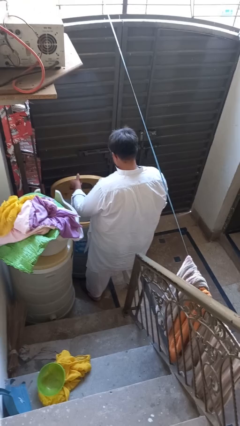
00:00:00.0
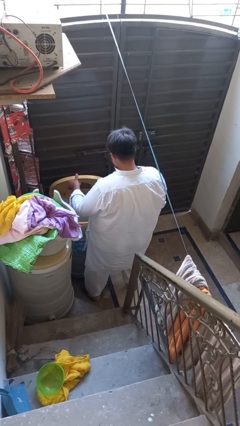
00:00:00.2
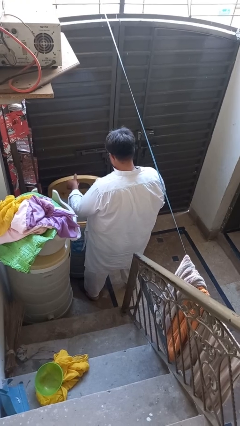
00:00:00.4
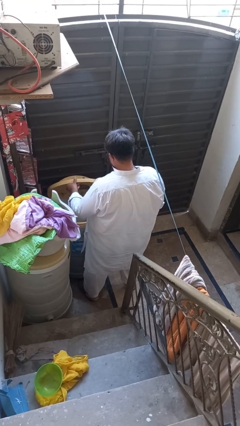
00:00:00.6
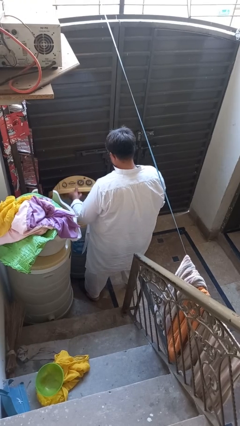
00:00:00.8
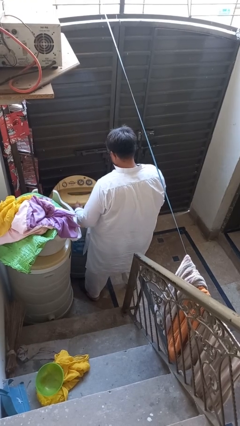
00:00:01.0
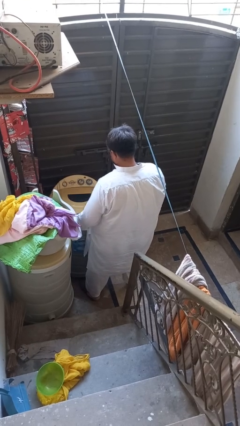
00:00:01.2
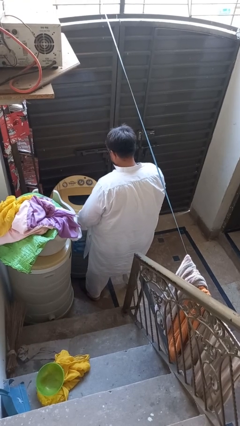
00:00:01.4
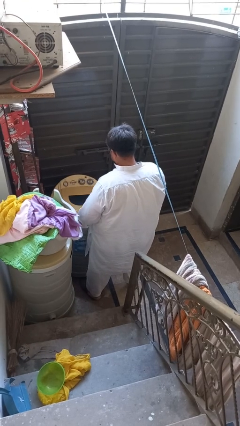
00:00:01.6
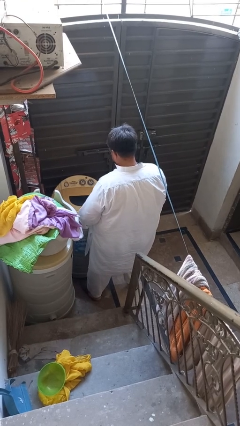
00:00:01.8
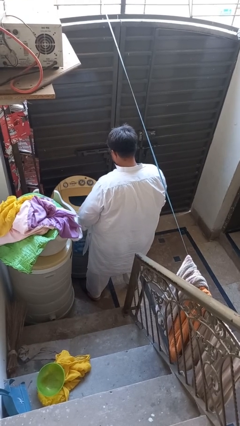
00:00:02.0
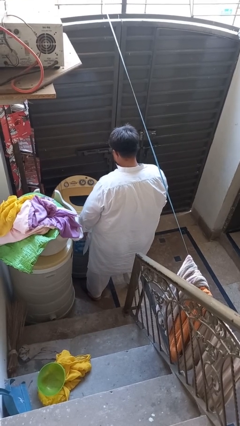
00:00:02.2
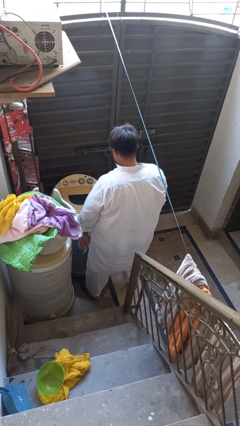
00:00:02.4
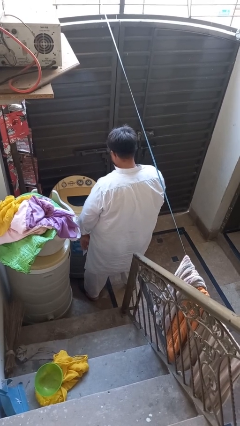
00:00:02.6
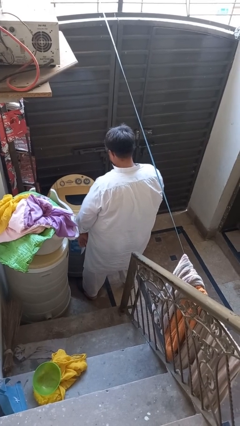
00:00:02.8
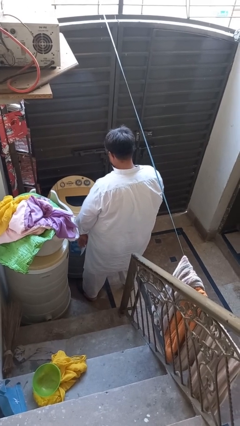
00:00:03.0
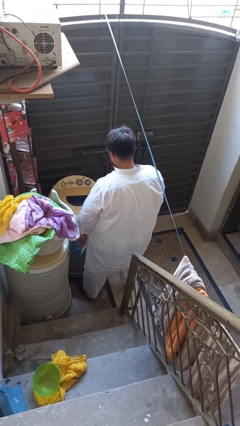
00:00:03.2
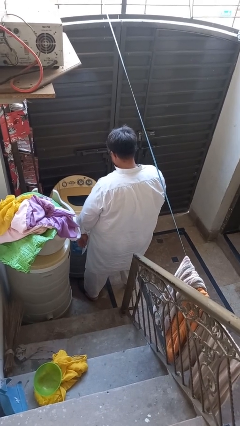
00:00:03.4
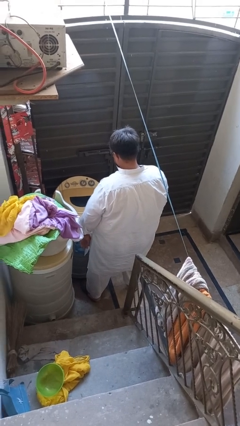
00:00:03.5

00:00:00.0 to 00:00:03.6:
person closes clothes washer

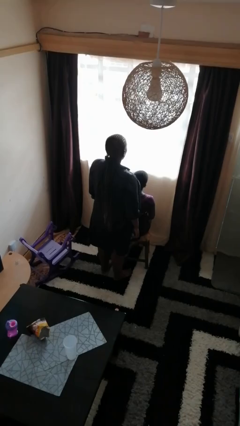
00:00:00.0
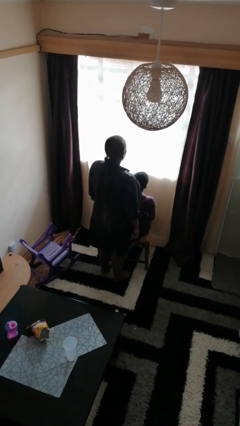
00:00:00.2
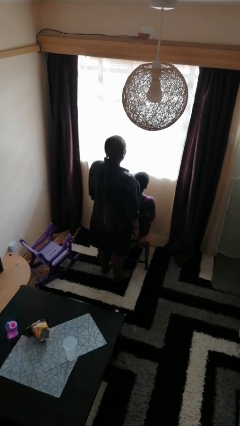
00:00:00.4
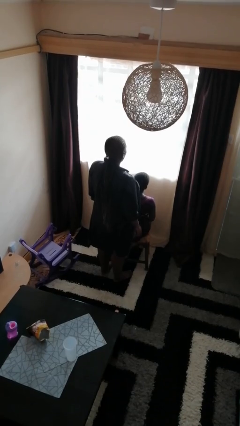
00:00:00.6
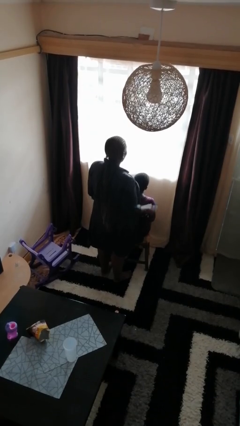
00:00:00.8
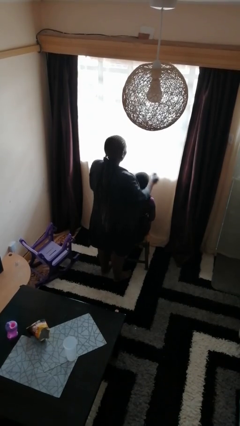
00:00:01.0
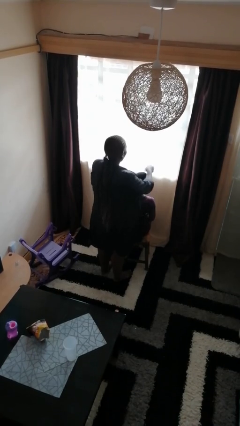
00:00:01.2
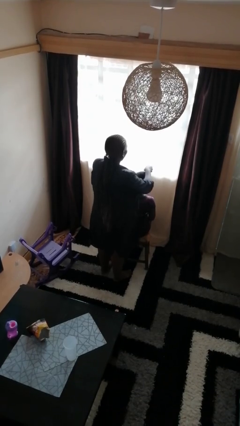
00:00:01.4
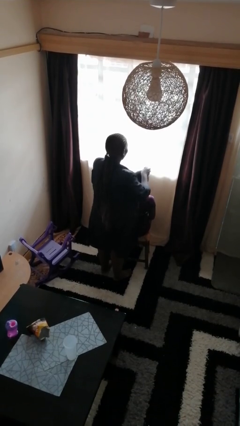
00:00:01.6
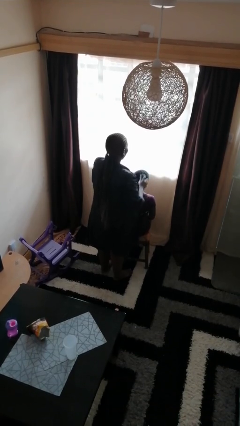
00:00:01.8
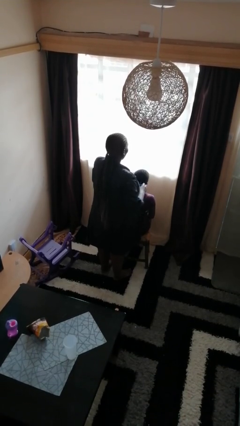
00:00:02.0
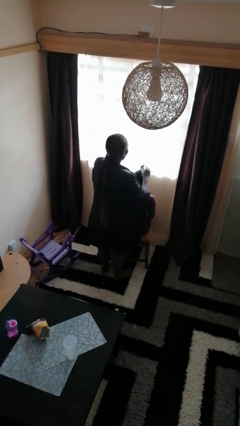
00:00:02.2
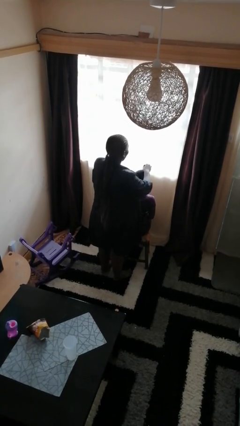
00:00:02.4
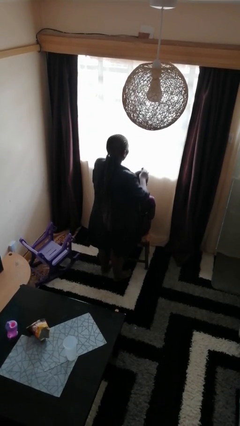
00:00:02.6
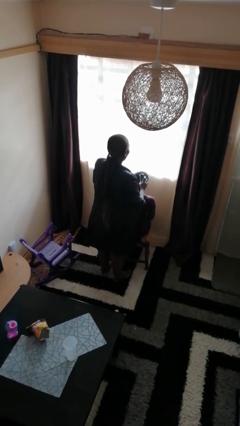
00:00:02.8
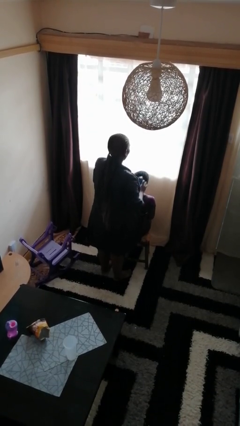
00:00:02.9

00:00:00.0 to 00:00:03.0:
person brushes hair of person

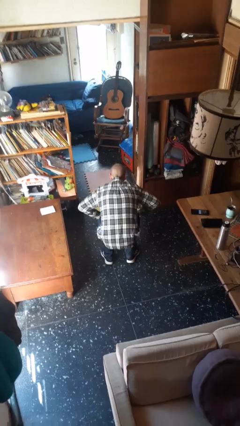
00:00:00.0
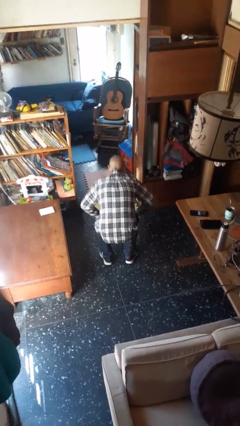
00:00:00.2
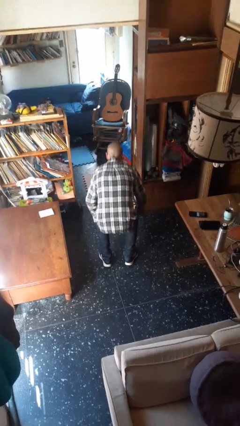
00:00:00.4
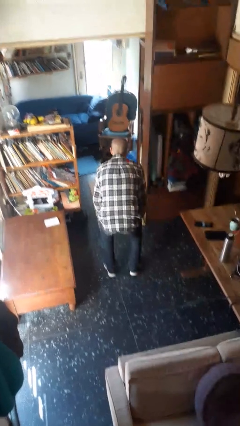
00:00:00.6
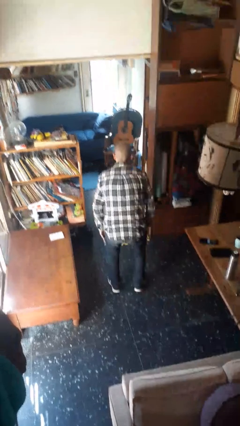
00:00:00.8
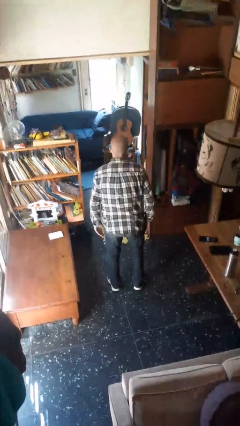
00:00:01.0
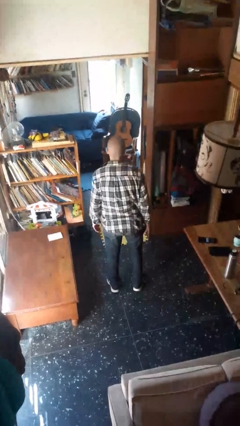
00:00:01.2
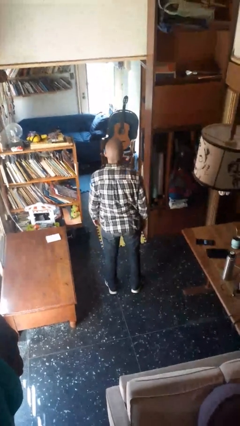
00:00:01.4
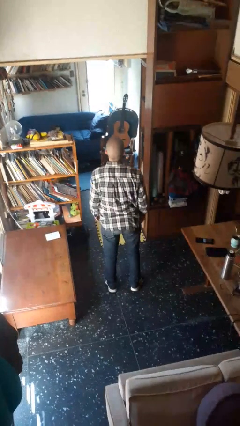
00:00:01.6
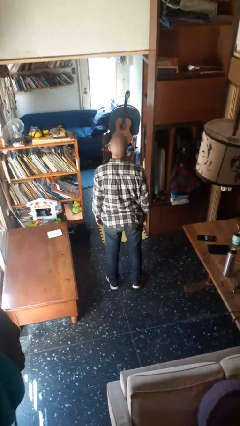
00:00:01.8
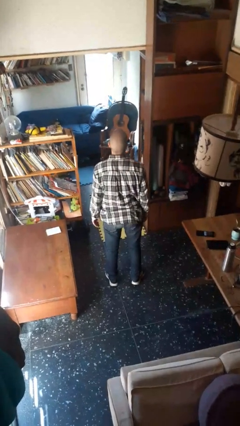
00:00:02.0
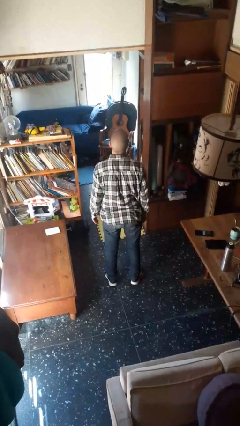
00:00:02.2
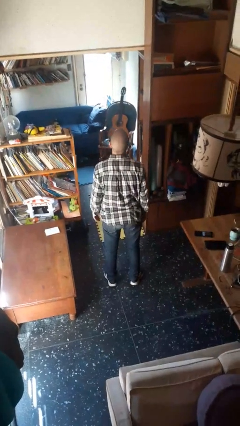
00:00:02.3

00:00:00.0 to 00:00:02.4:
person stands up

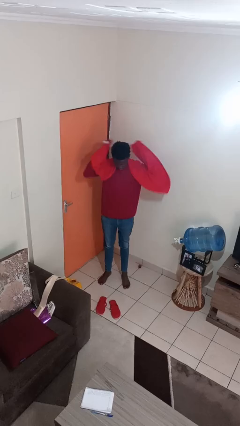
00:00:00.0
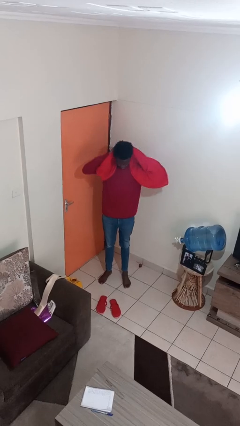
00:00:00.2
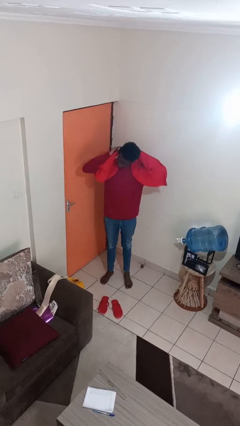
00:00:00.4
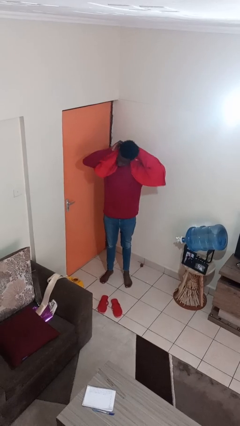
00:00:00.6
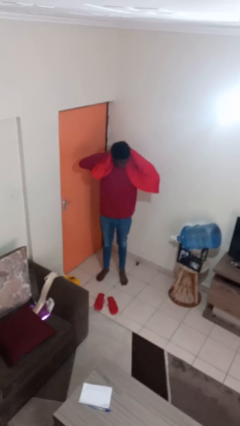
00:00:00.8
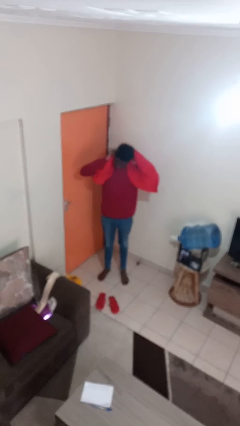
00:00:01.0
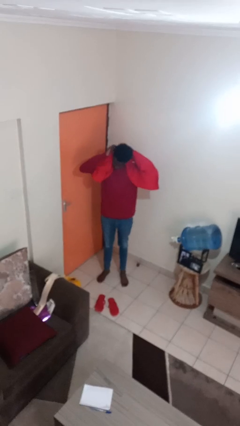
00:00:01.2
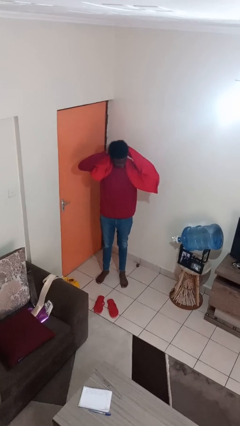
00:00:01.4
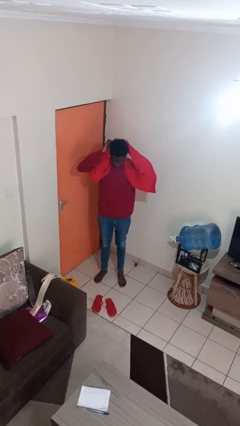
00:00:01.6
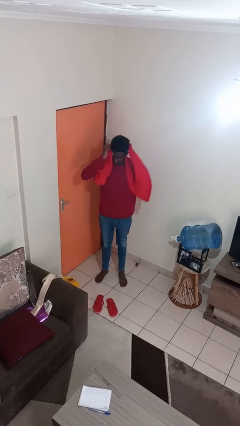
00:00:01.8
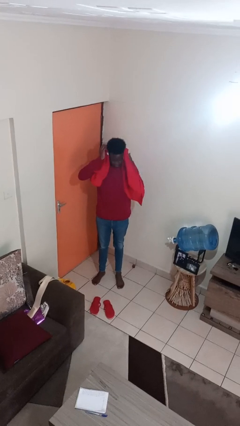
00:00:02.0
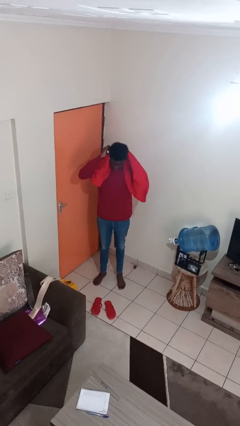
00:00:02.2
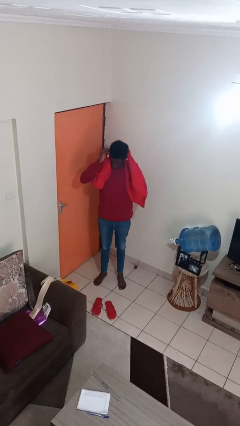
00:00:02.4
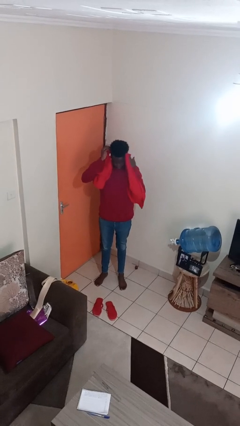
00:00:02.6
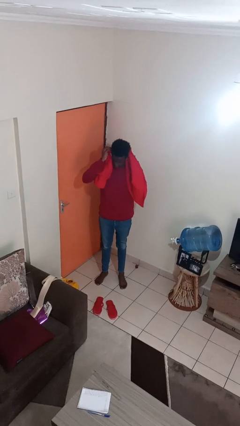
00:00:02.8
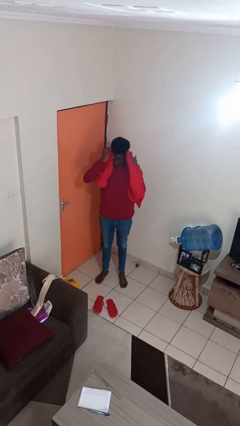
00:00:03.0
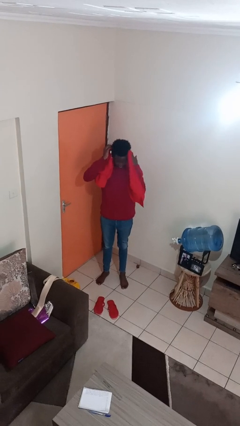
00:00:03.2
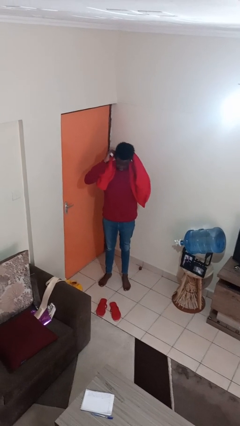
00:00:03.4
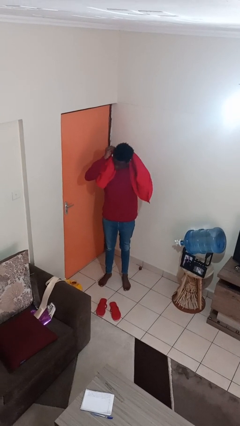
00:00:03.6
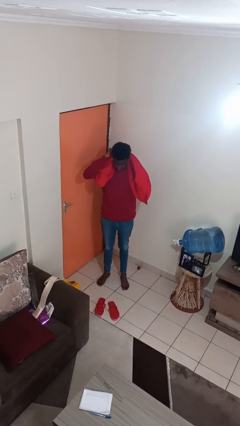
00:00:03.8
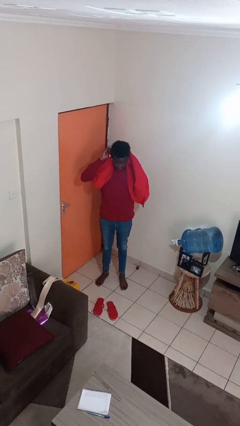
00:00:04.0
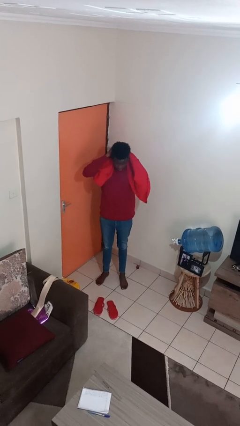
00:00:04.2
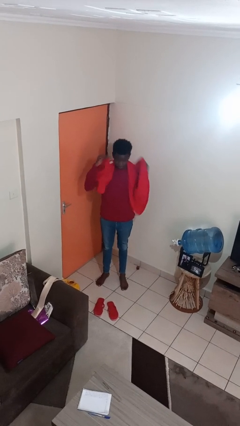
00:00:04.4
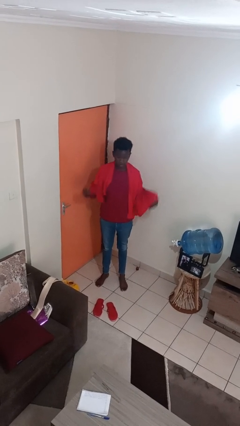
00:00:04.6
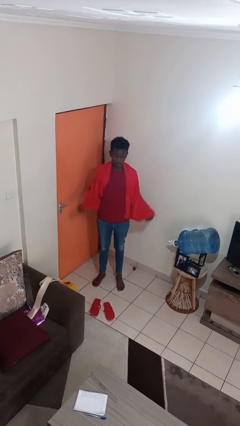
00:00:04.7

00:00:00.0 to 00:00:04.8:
person dries hair with towel

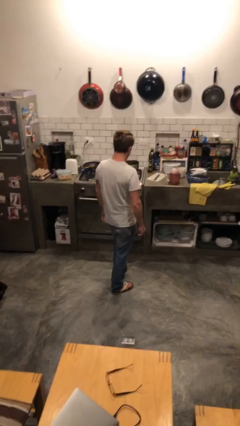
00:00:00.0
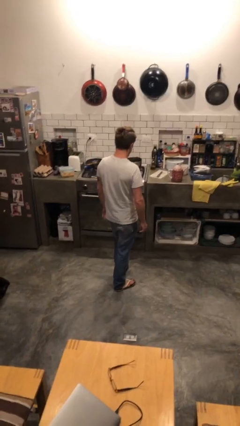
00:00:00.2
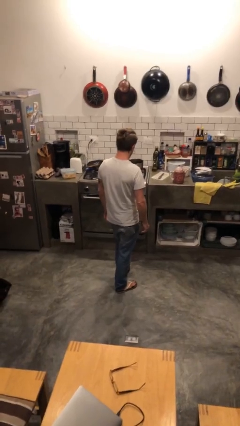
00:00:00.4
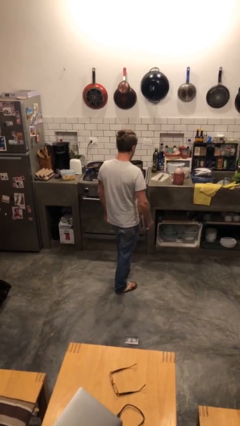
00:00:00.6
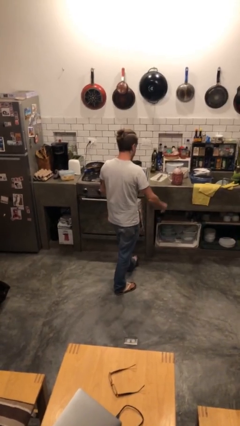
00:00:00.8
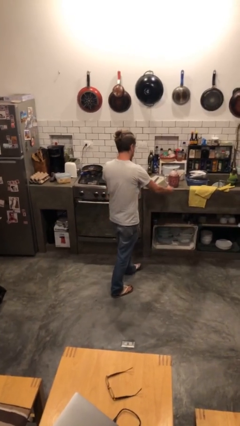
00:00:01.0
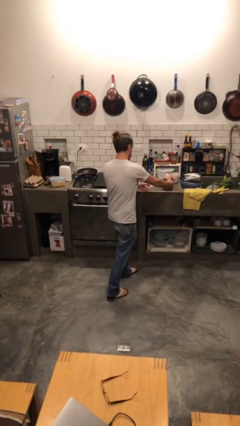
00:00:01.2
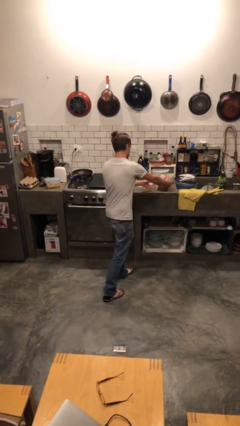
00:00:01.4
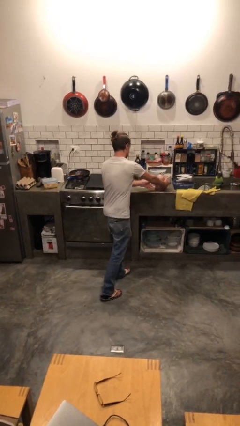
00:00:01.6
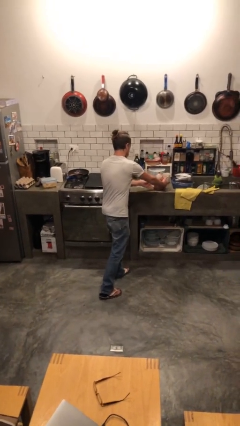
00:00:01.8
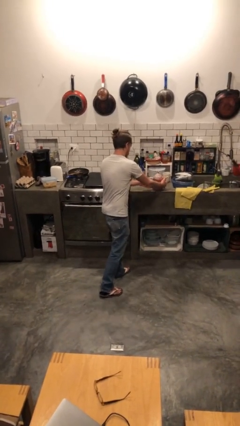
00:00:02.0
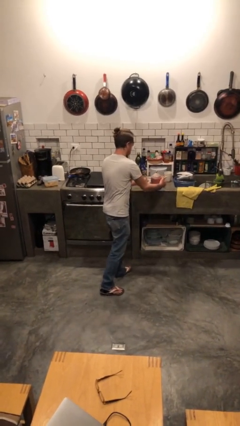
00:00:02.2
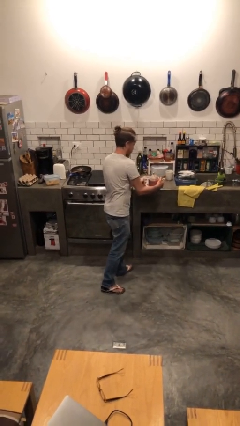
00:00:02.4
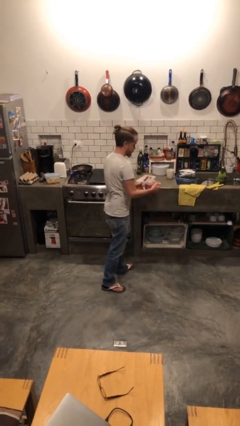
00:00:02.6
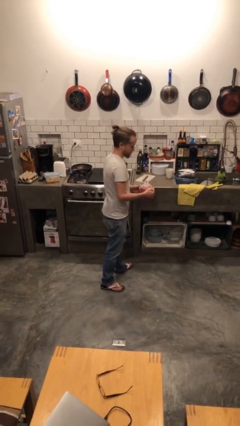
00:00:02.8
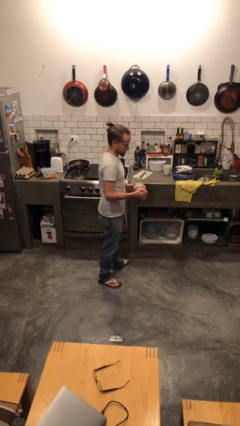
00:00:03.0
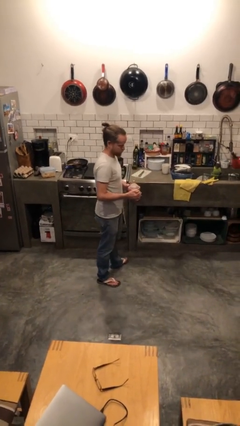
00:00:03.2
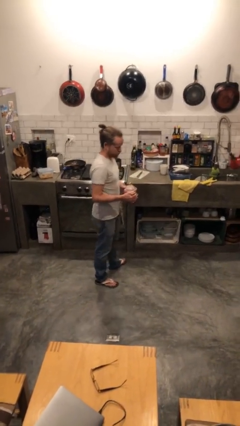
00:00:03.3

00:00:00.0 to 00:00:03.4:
person picks up object from countertop
